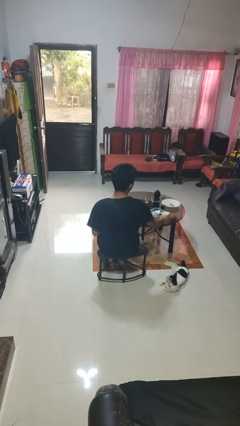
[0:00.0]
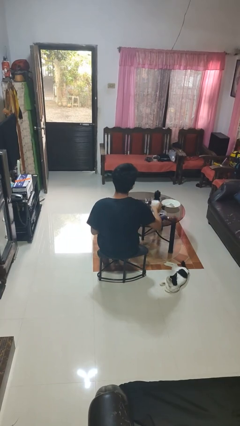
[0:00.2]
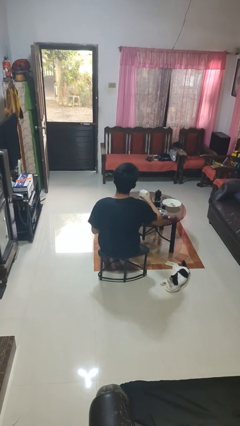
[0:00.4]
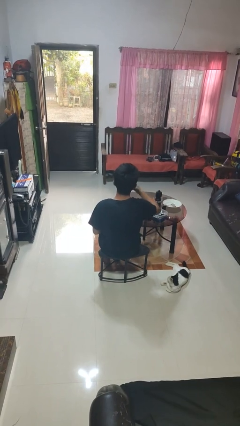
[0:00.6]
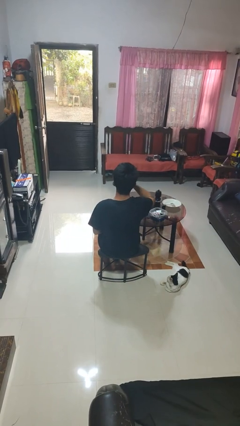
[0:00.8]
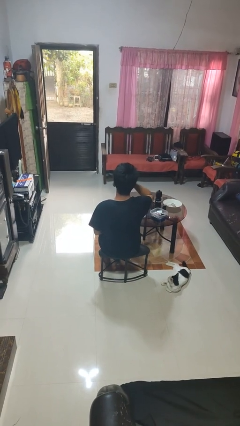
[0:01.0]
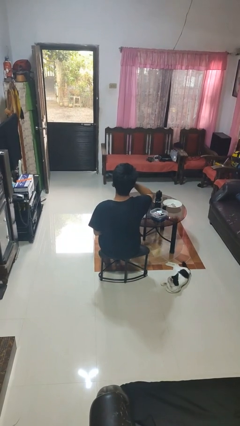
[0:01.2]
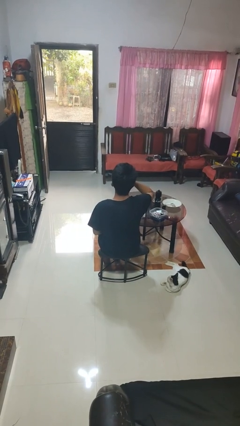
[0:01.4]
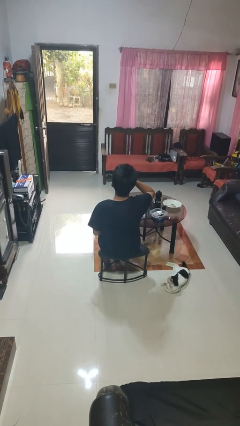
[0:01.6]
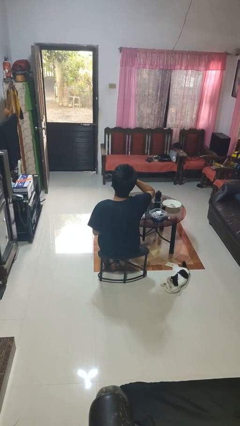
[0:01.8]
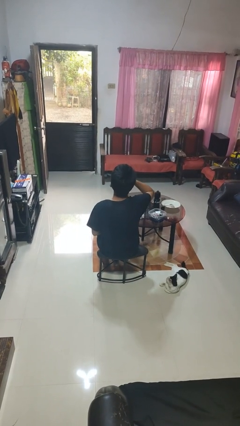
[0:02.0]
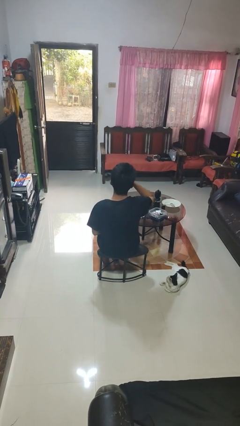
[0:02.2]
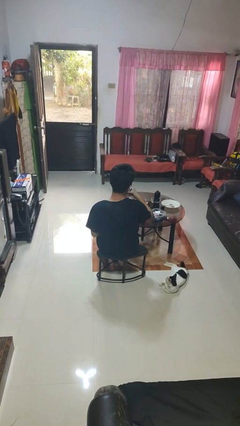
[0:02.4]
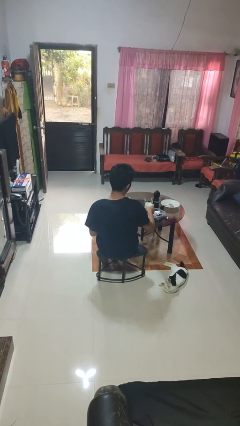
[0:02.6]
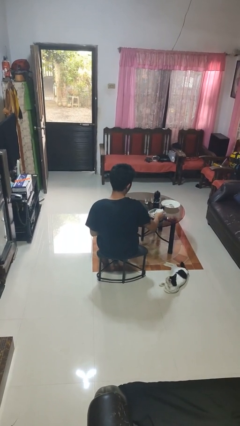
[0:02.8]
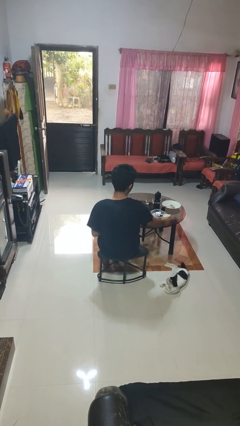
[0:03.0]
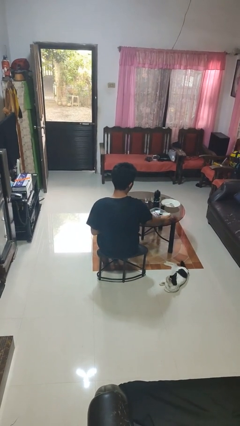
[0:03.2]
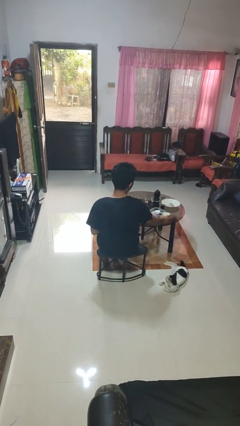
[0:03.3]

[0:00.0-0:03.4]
person drinks from cup

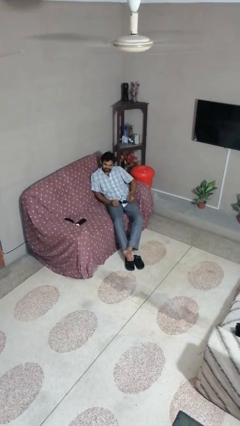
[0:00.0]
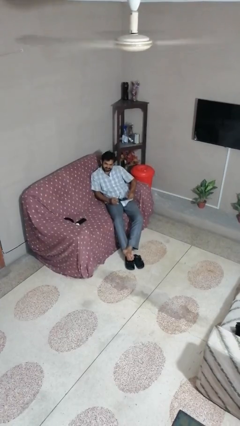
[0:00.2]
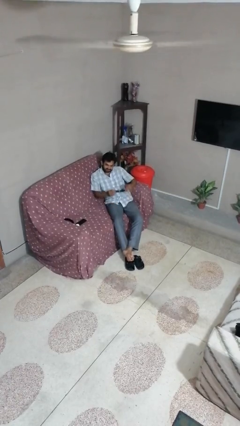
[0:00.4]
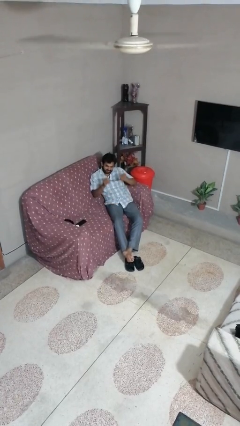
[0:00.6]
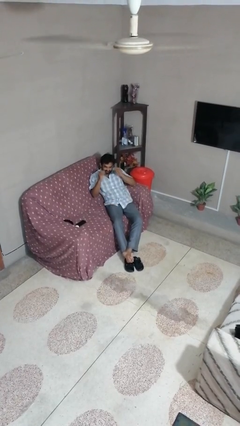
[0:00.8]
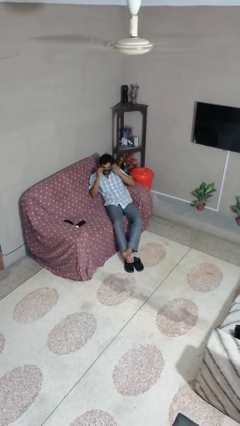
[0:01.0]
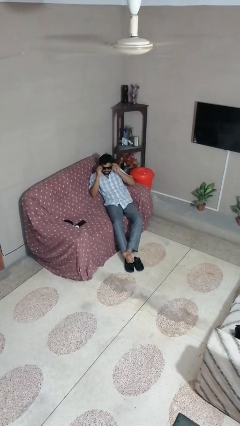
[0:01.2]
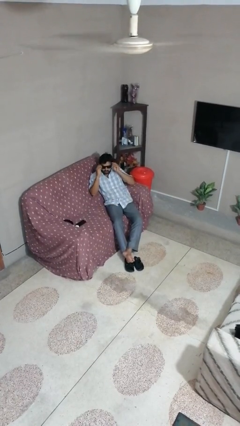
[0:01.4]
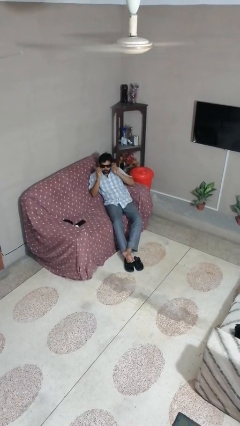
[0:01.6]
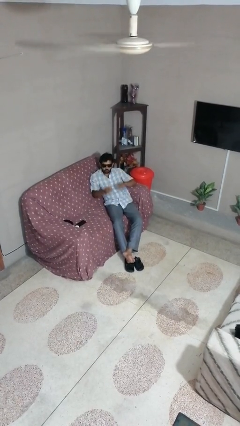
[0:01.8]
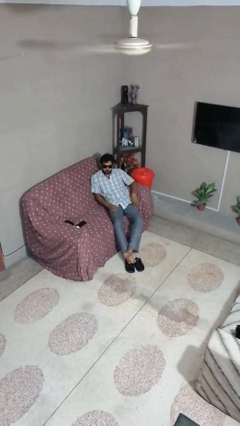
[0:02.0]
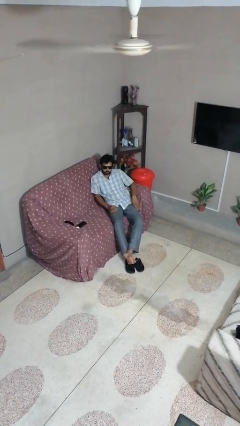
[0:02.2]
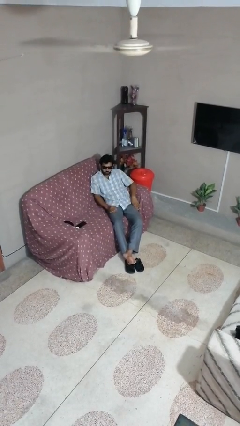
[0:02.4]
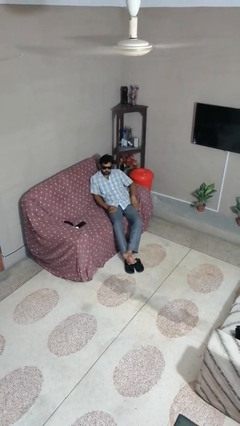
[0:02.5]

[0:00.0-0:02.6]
person puts on sunglasses

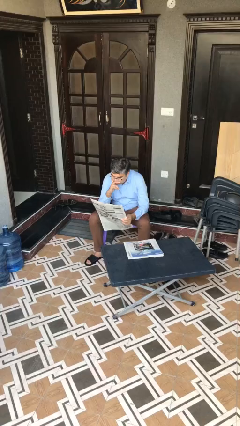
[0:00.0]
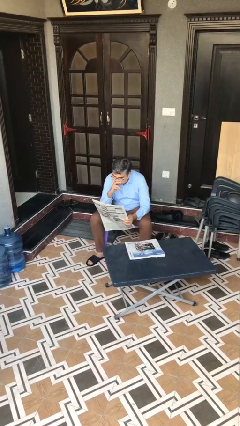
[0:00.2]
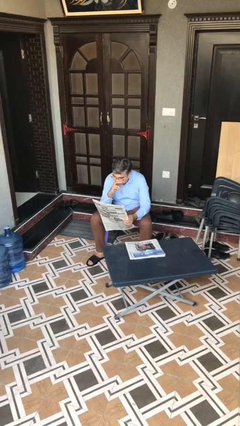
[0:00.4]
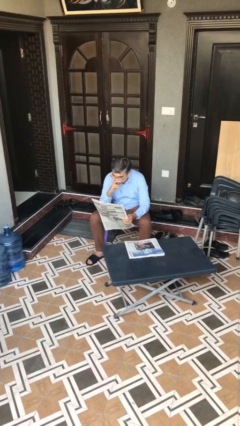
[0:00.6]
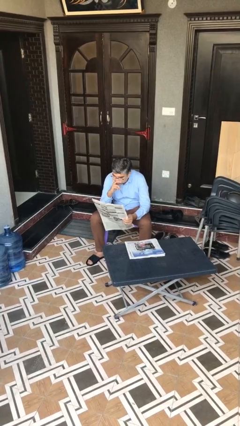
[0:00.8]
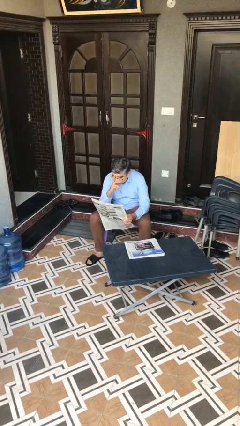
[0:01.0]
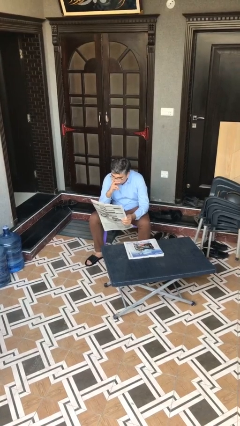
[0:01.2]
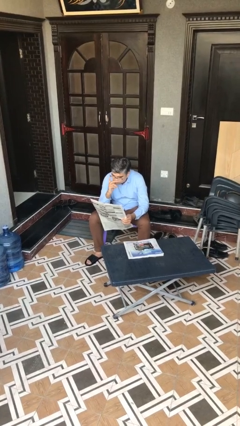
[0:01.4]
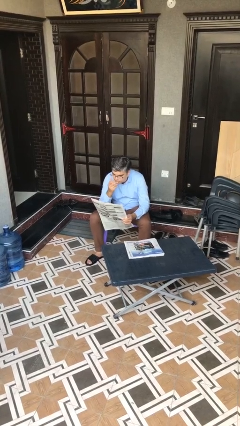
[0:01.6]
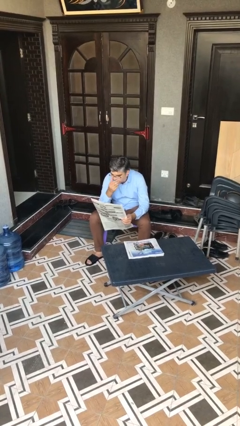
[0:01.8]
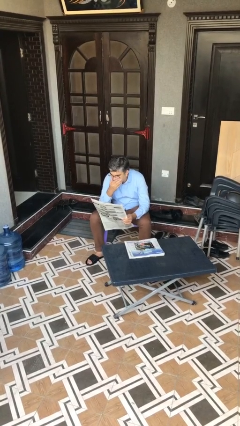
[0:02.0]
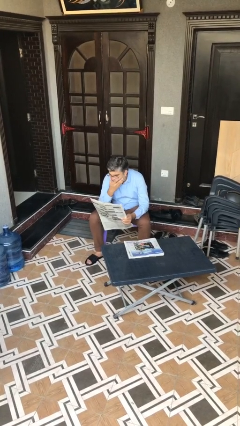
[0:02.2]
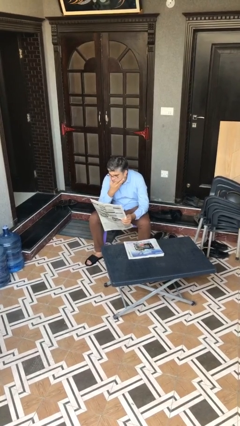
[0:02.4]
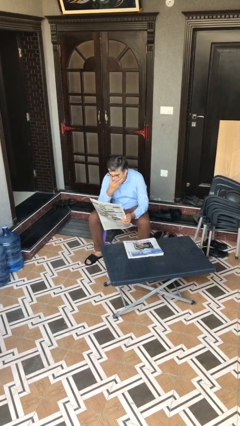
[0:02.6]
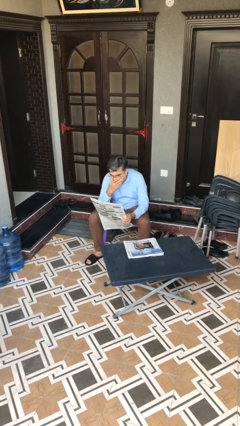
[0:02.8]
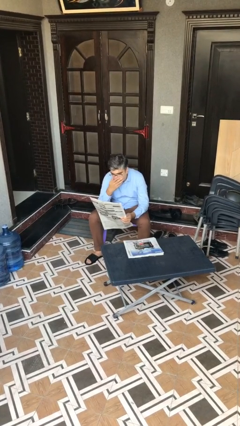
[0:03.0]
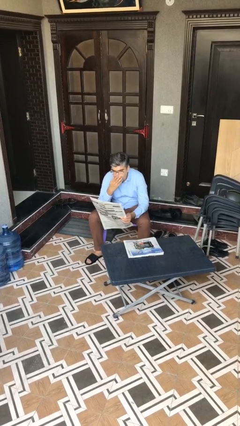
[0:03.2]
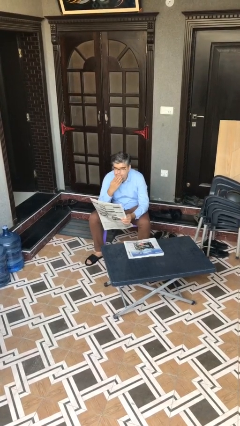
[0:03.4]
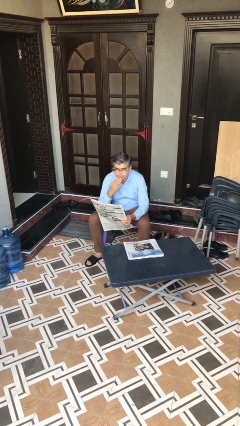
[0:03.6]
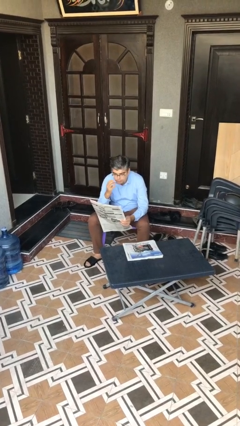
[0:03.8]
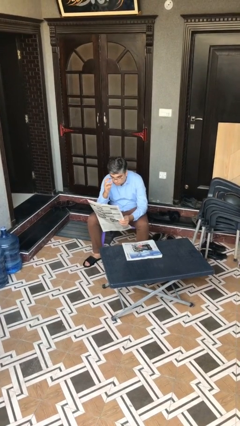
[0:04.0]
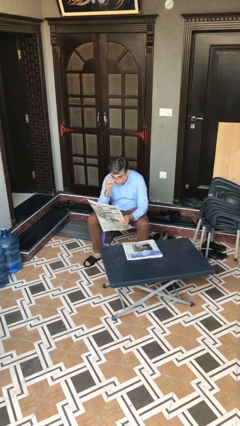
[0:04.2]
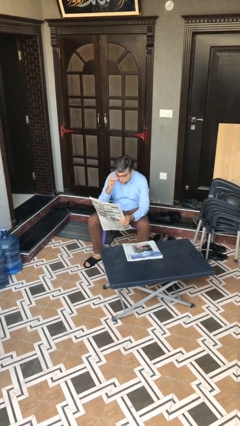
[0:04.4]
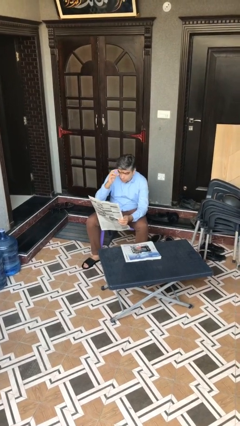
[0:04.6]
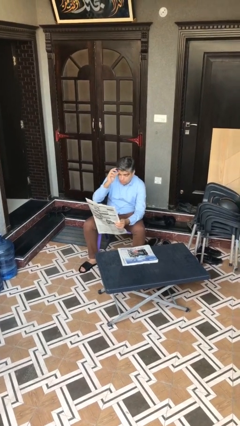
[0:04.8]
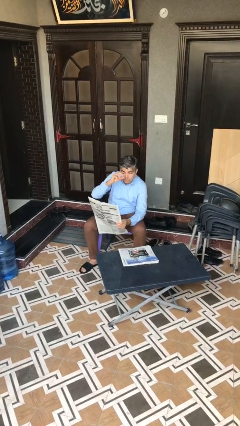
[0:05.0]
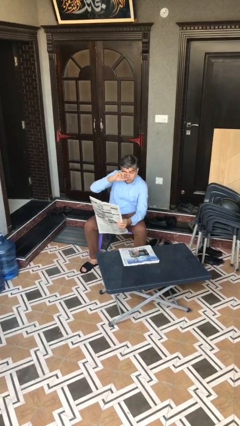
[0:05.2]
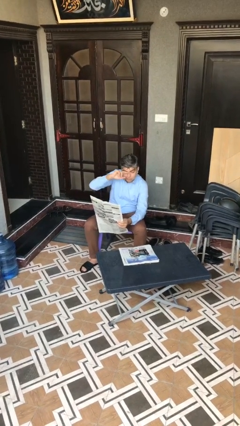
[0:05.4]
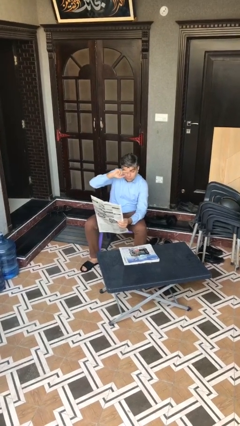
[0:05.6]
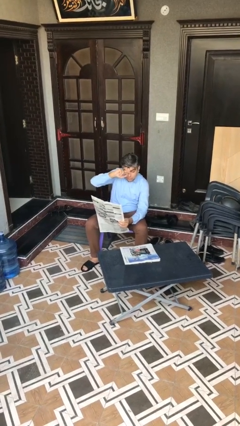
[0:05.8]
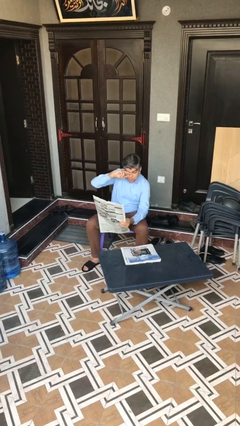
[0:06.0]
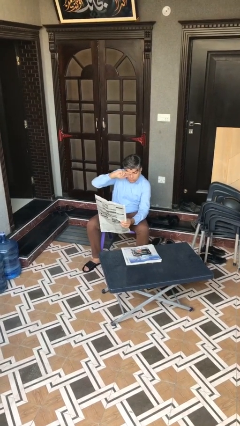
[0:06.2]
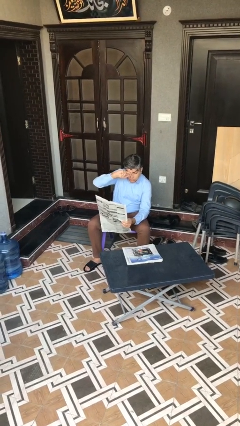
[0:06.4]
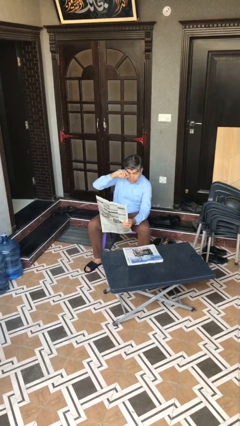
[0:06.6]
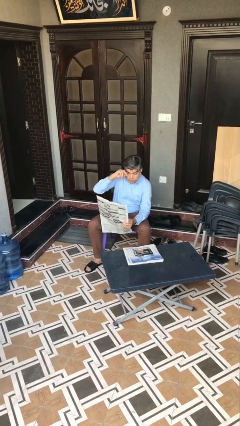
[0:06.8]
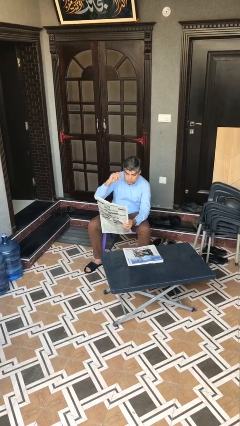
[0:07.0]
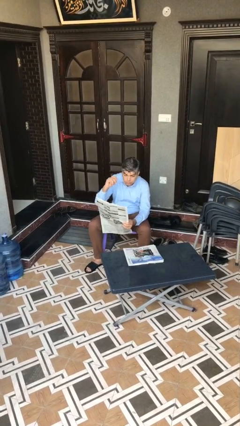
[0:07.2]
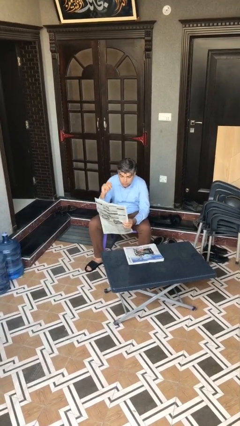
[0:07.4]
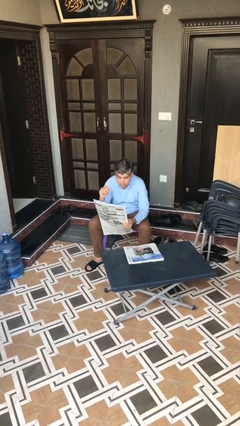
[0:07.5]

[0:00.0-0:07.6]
person reads document

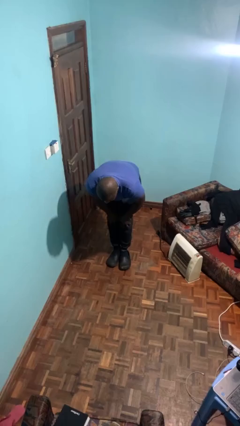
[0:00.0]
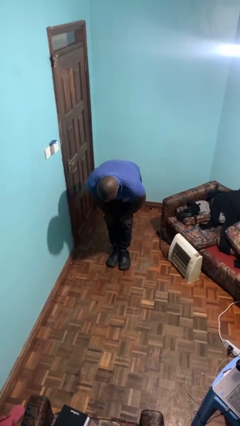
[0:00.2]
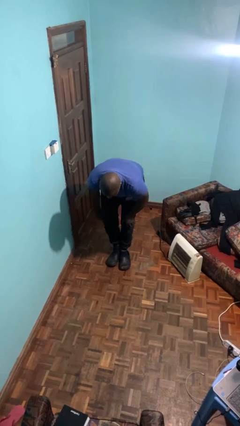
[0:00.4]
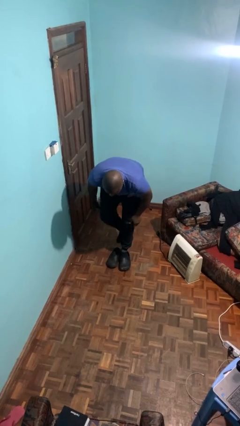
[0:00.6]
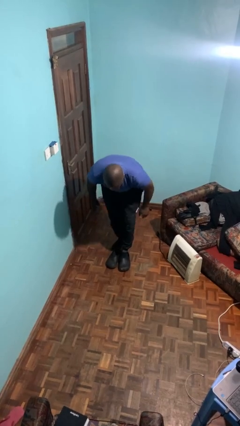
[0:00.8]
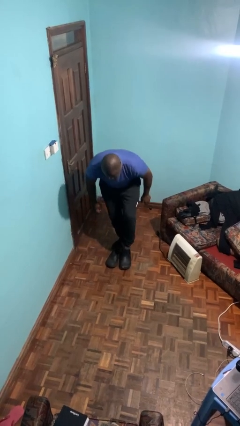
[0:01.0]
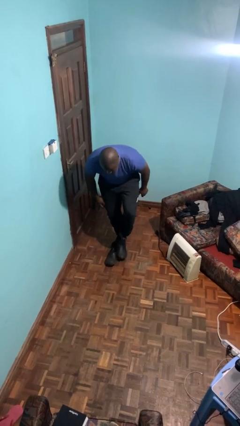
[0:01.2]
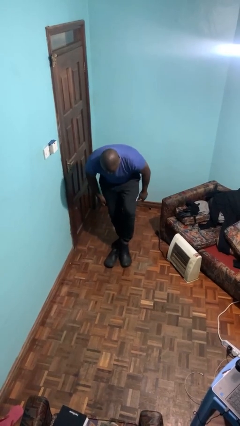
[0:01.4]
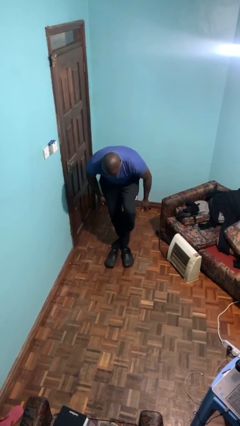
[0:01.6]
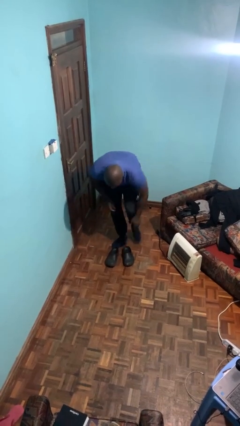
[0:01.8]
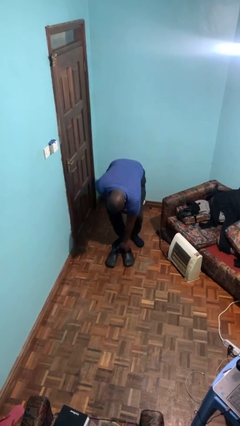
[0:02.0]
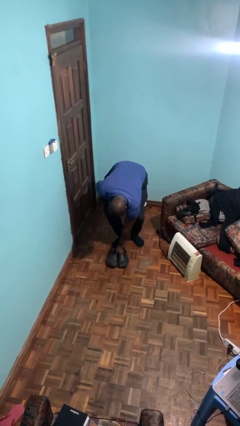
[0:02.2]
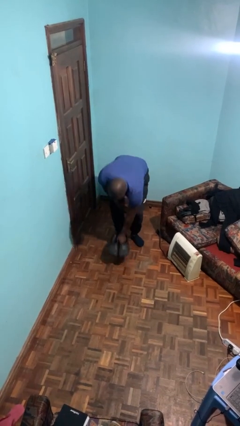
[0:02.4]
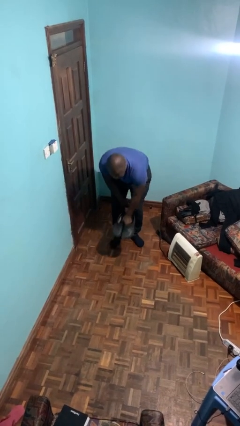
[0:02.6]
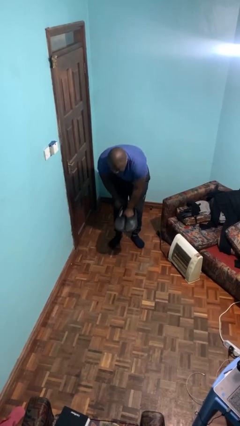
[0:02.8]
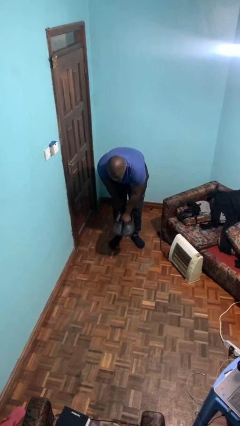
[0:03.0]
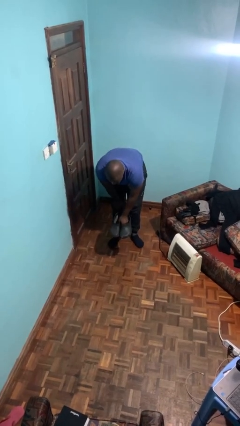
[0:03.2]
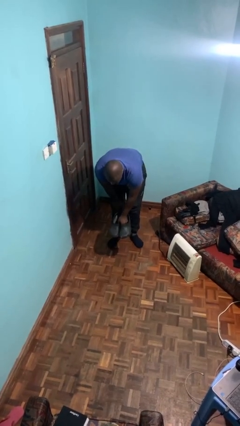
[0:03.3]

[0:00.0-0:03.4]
person takes off shoes

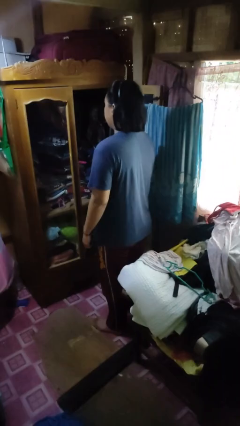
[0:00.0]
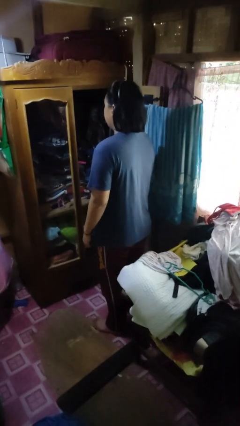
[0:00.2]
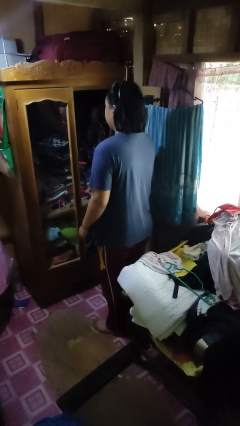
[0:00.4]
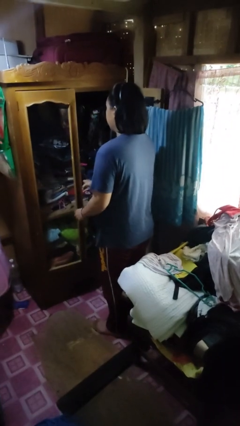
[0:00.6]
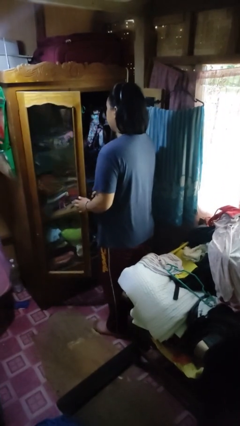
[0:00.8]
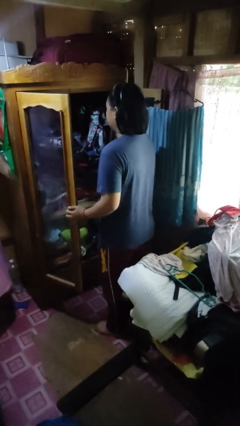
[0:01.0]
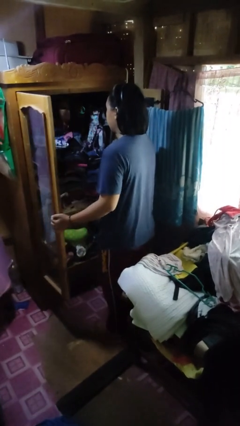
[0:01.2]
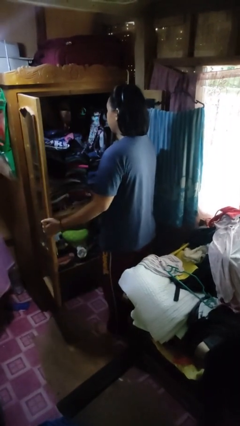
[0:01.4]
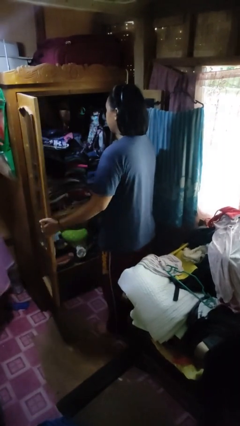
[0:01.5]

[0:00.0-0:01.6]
person opens closet door
